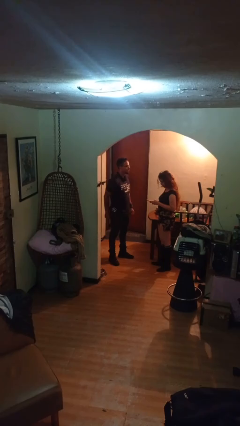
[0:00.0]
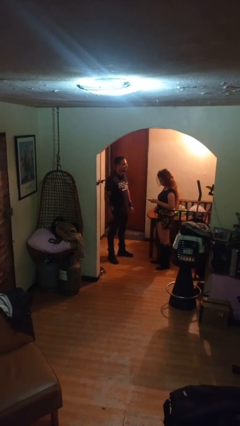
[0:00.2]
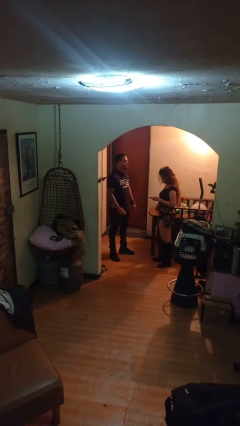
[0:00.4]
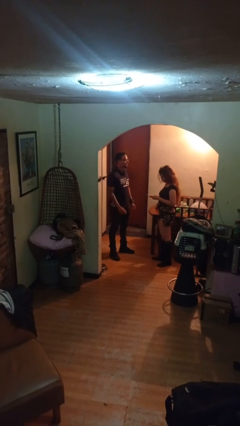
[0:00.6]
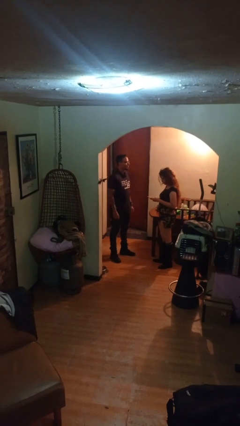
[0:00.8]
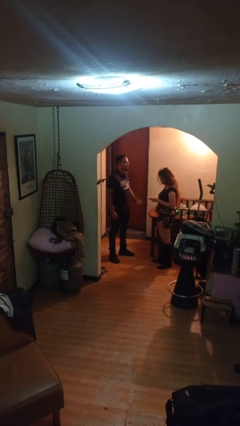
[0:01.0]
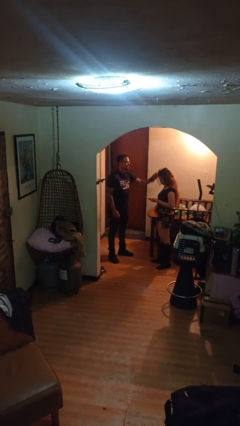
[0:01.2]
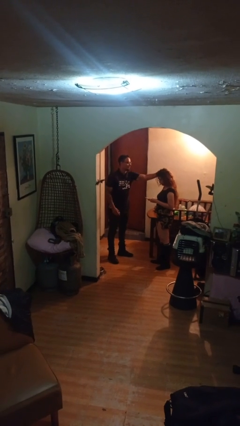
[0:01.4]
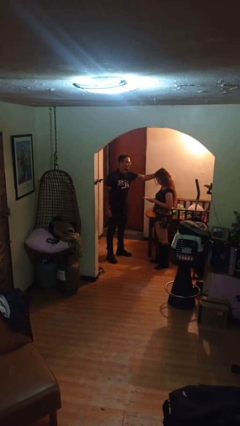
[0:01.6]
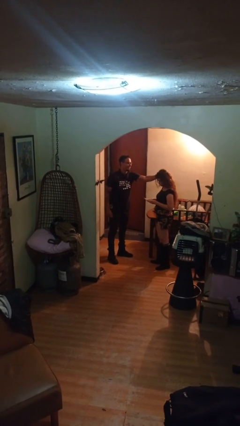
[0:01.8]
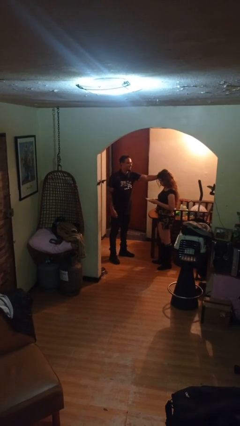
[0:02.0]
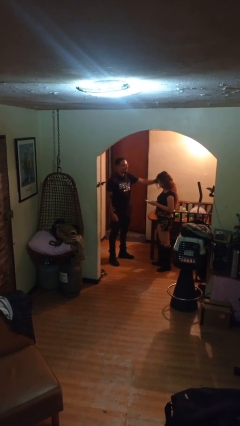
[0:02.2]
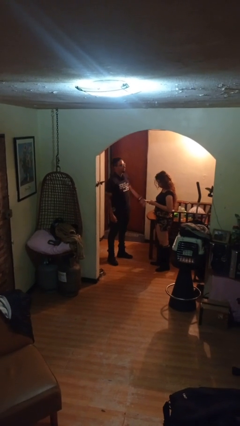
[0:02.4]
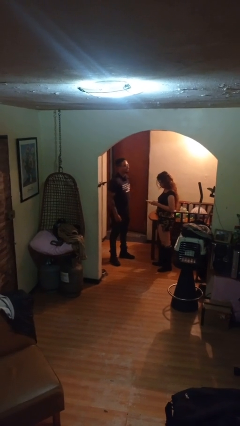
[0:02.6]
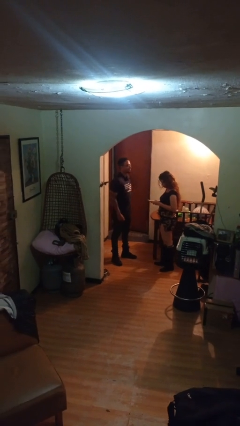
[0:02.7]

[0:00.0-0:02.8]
person drinks from shotglass

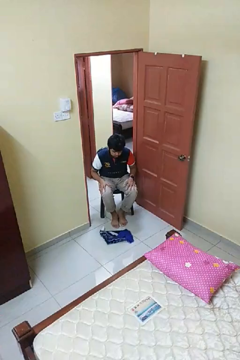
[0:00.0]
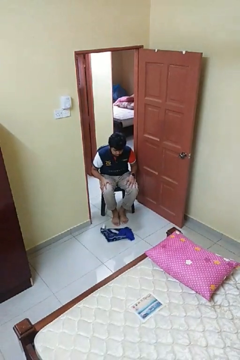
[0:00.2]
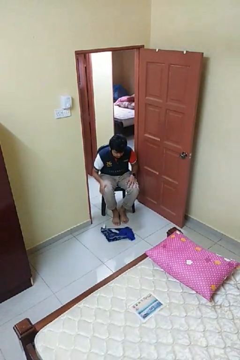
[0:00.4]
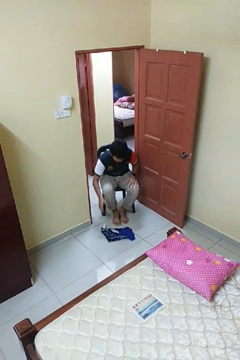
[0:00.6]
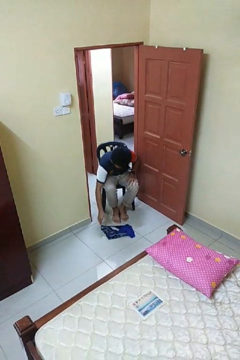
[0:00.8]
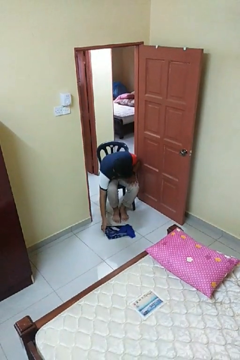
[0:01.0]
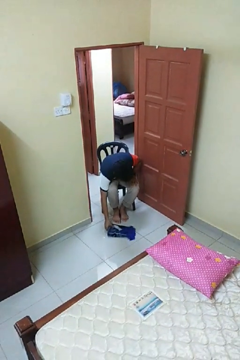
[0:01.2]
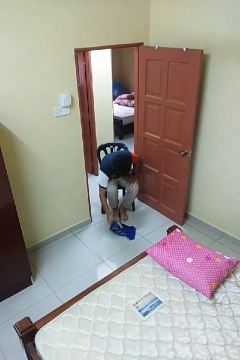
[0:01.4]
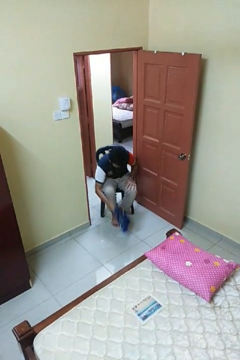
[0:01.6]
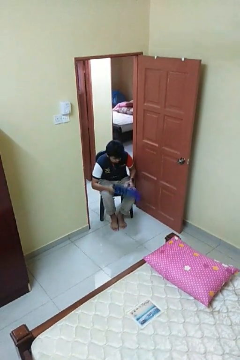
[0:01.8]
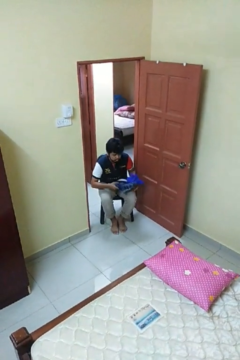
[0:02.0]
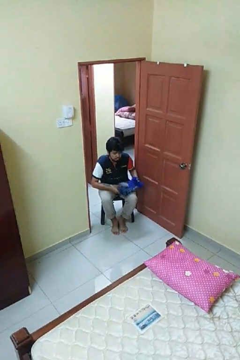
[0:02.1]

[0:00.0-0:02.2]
person picks up object from floor

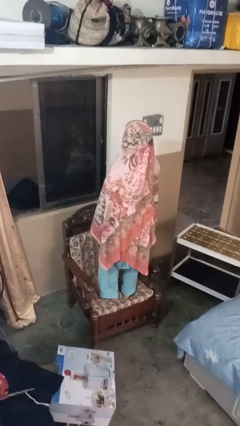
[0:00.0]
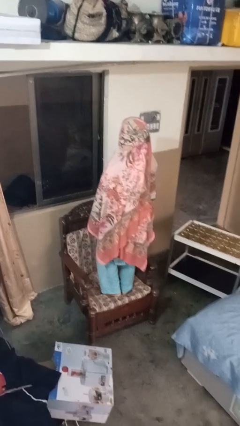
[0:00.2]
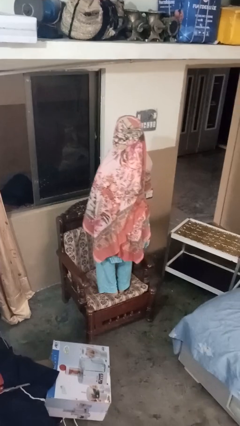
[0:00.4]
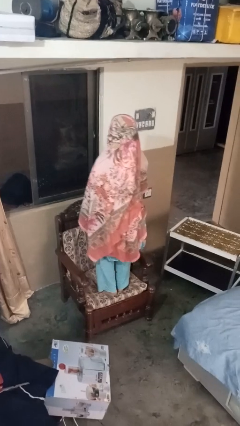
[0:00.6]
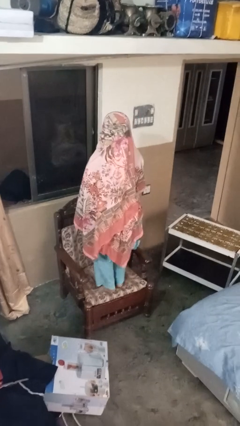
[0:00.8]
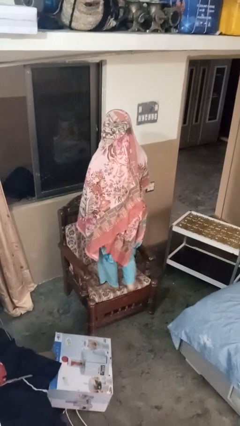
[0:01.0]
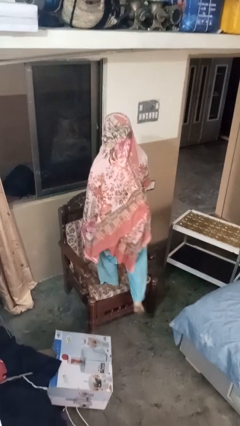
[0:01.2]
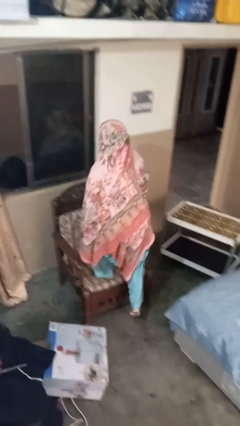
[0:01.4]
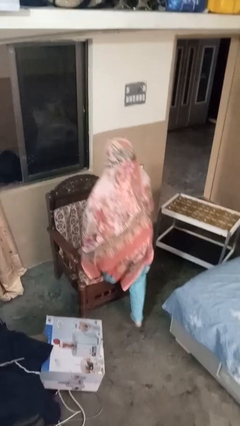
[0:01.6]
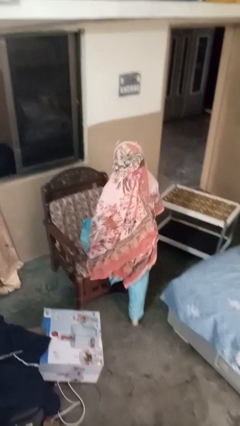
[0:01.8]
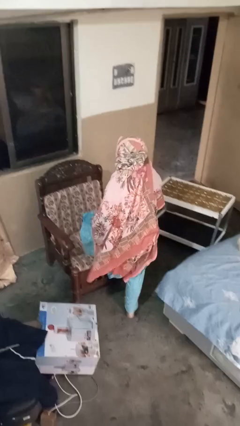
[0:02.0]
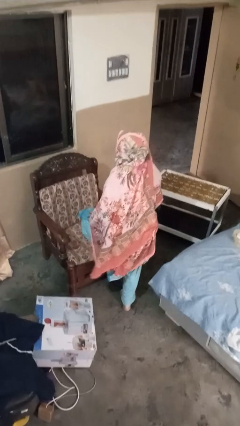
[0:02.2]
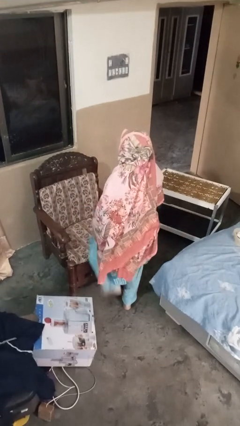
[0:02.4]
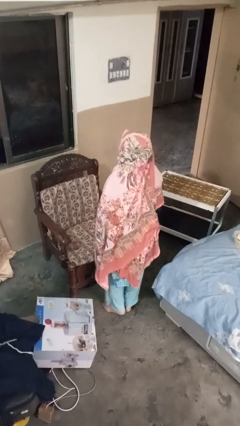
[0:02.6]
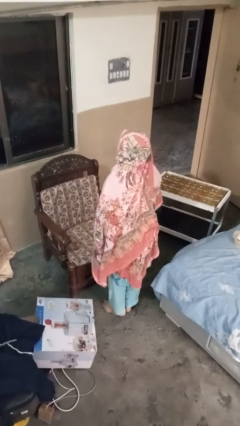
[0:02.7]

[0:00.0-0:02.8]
person climbs off couch

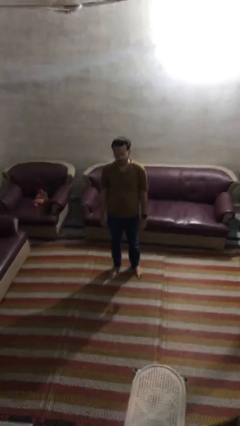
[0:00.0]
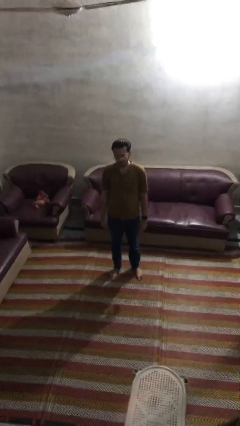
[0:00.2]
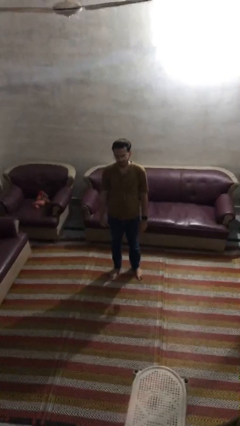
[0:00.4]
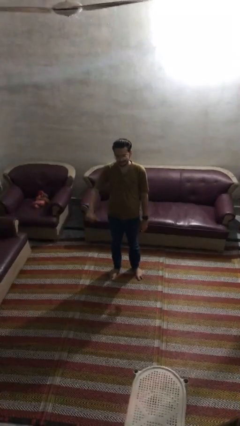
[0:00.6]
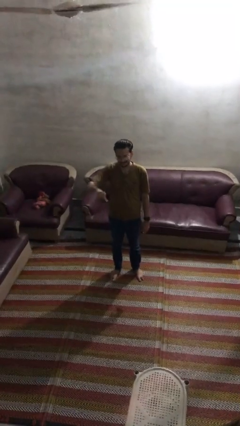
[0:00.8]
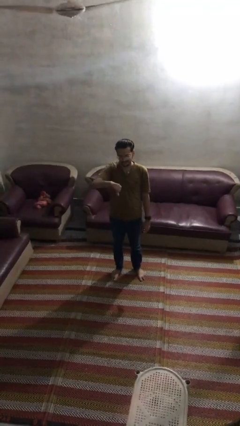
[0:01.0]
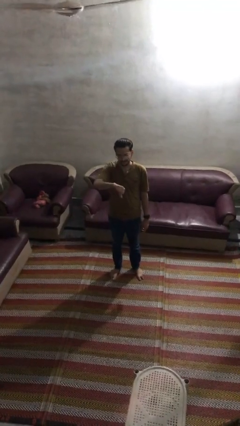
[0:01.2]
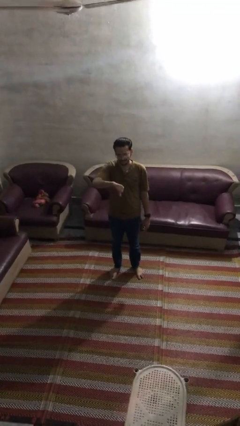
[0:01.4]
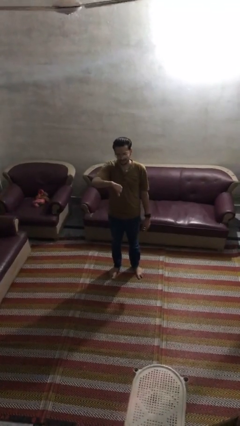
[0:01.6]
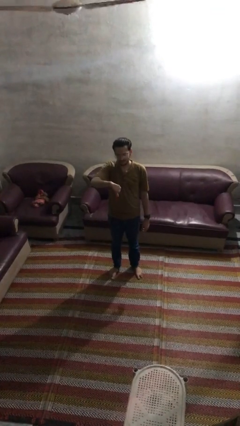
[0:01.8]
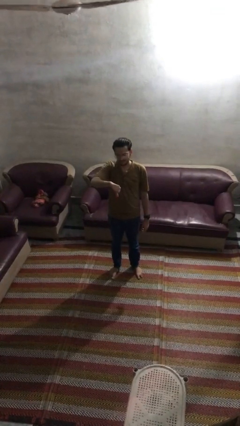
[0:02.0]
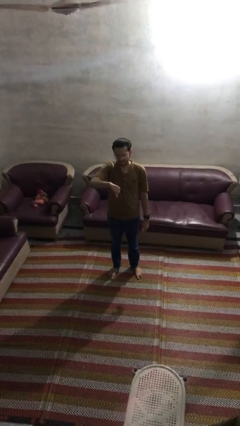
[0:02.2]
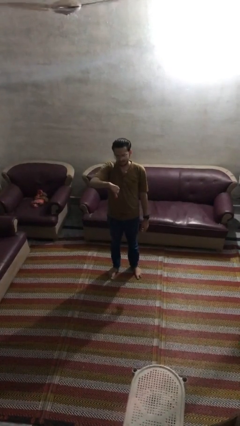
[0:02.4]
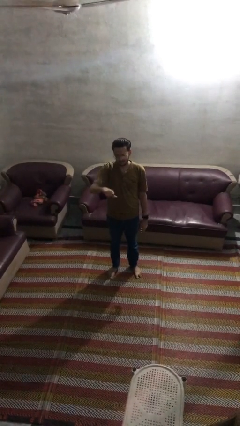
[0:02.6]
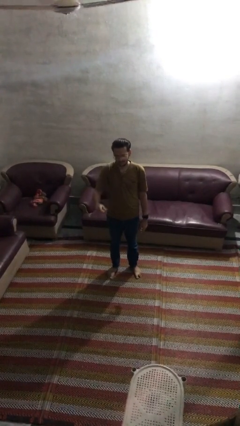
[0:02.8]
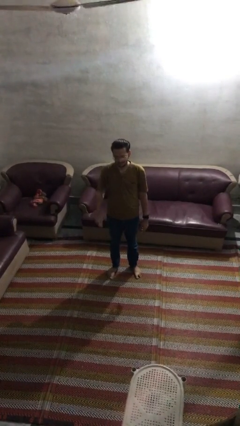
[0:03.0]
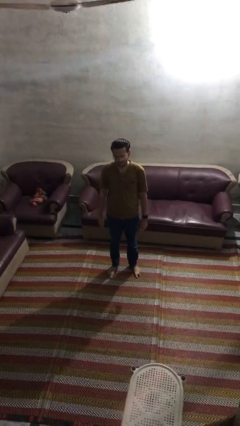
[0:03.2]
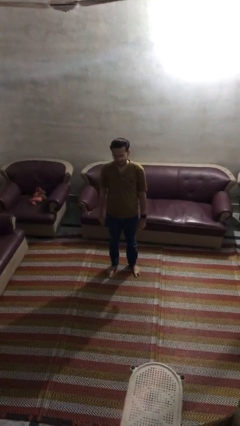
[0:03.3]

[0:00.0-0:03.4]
person gestures thumbs down

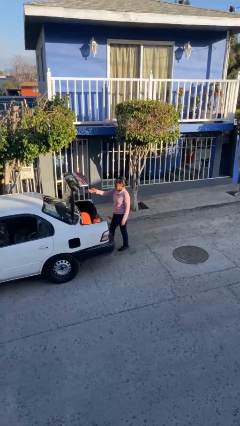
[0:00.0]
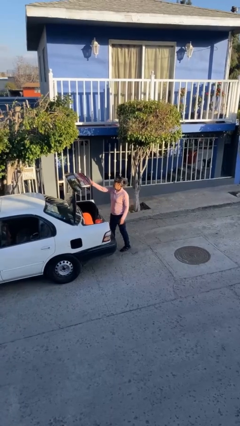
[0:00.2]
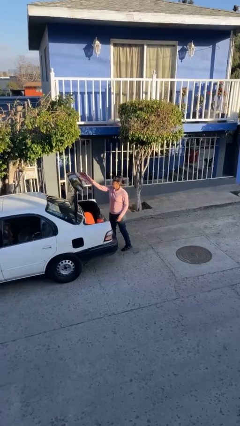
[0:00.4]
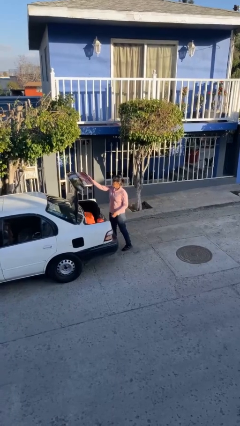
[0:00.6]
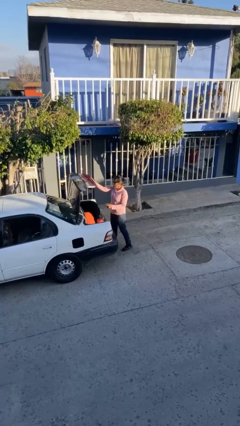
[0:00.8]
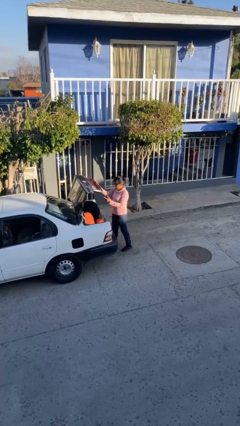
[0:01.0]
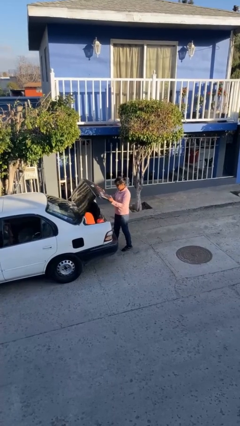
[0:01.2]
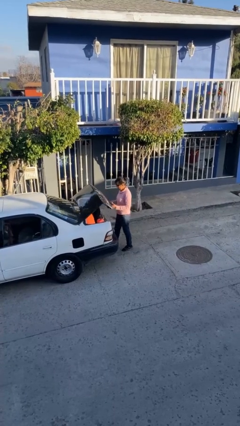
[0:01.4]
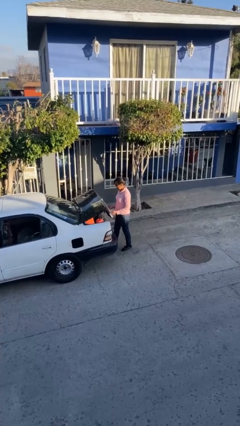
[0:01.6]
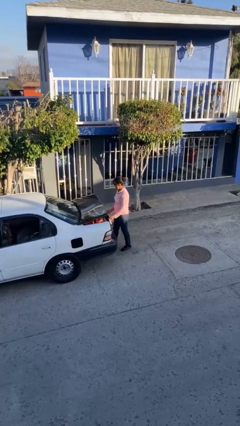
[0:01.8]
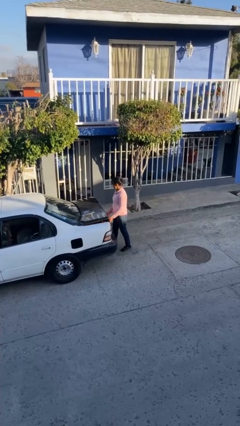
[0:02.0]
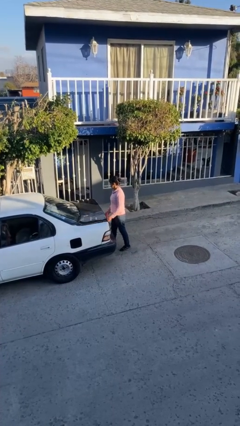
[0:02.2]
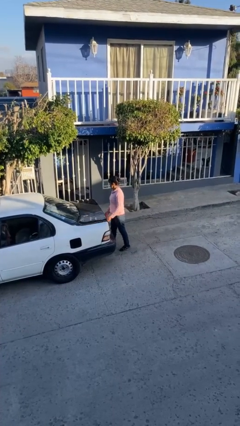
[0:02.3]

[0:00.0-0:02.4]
person closes car trunk

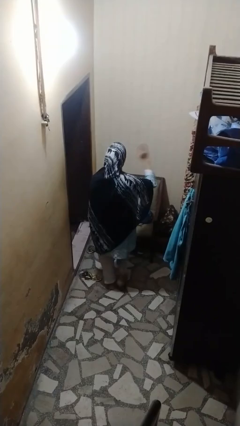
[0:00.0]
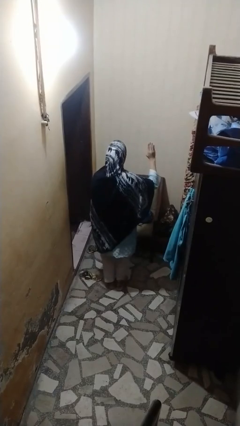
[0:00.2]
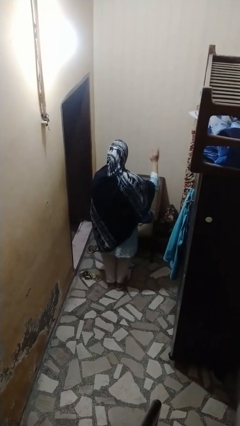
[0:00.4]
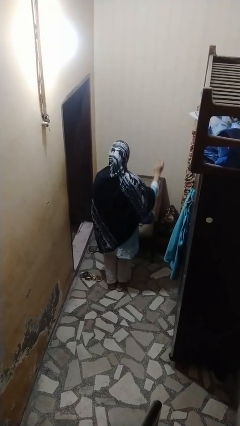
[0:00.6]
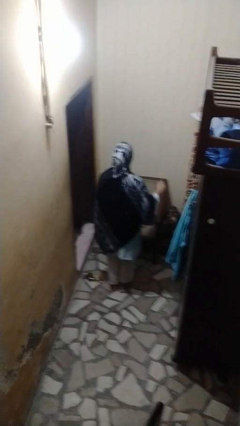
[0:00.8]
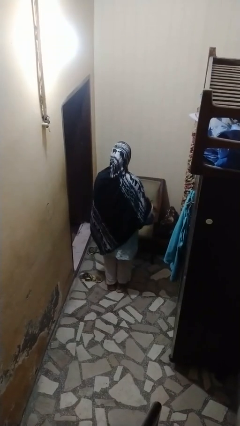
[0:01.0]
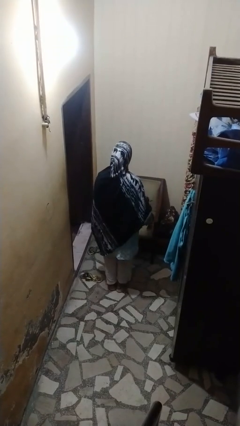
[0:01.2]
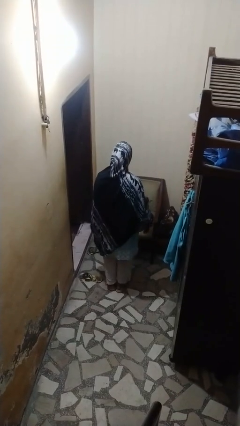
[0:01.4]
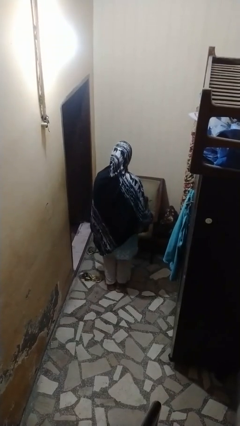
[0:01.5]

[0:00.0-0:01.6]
person salutes

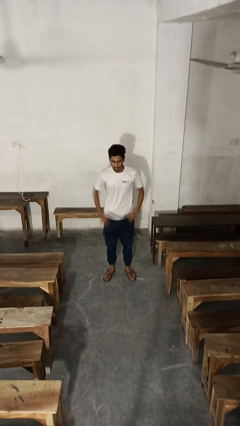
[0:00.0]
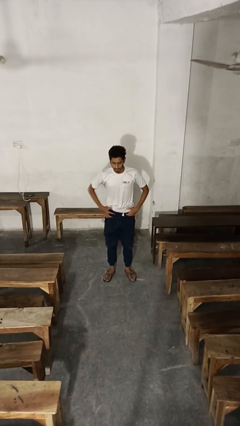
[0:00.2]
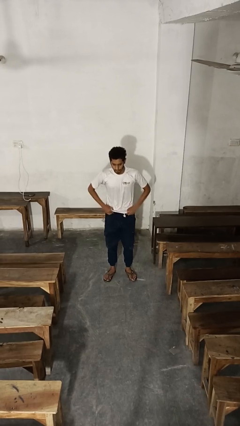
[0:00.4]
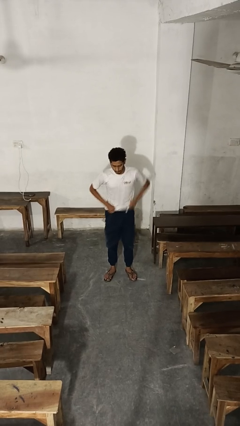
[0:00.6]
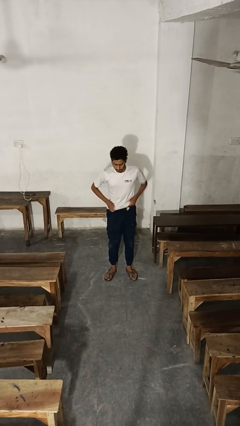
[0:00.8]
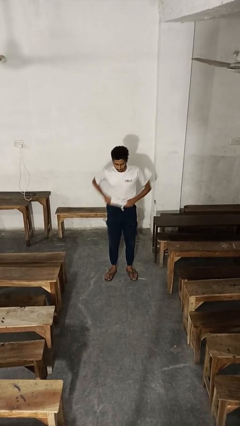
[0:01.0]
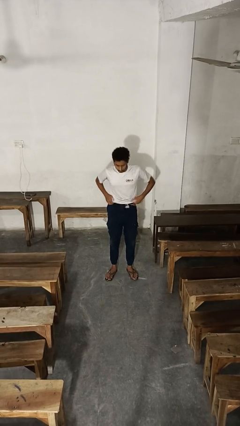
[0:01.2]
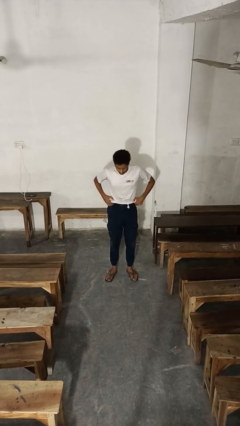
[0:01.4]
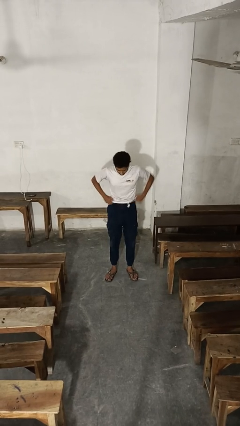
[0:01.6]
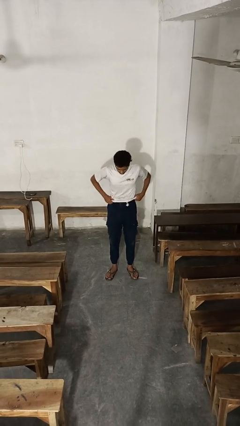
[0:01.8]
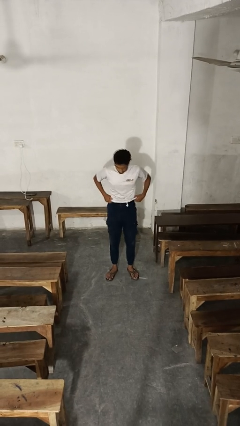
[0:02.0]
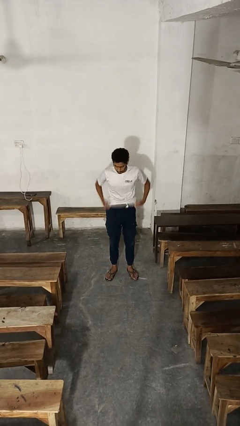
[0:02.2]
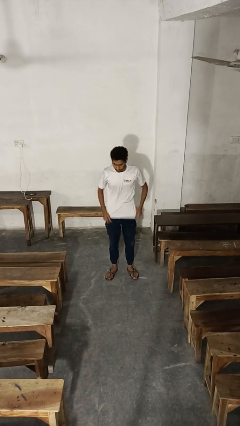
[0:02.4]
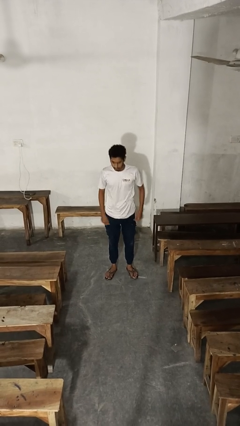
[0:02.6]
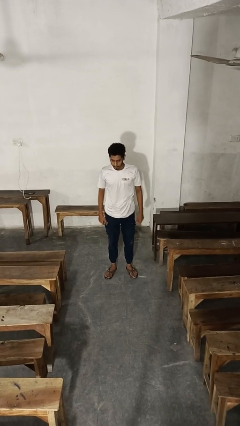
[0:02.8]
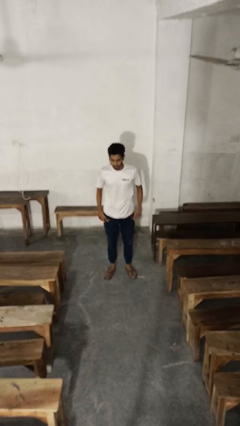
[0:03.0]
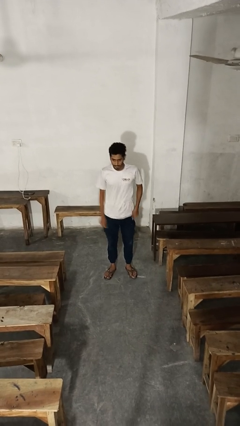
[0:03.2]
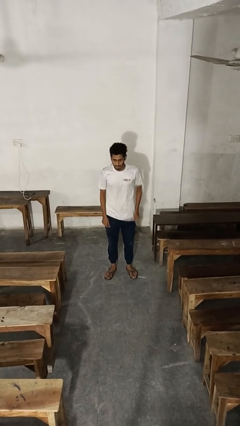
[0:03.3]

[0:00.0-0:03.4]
person hikes up pants
